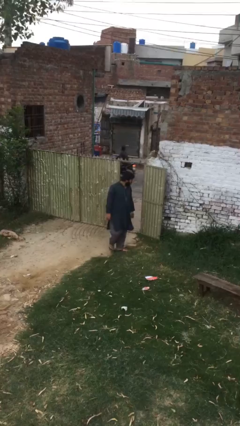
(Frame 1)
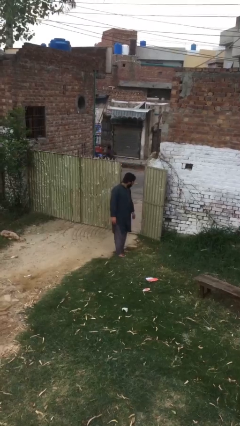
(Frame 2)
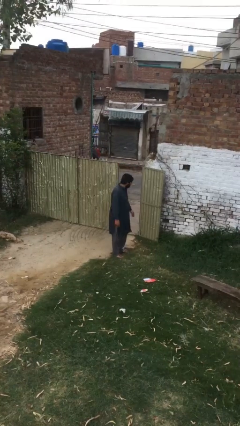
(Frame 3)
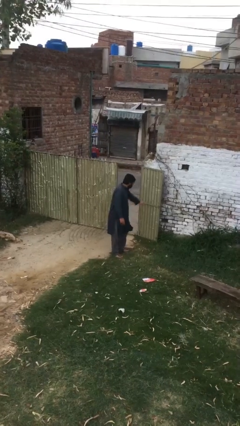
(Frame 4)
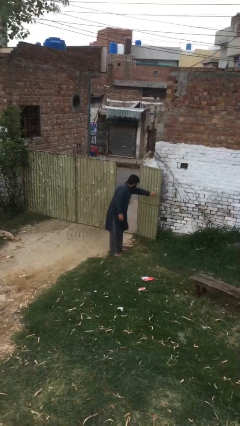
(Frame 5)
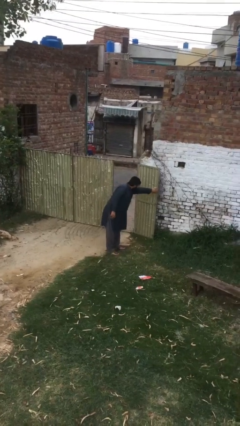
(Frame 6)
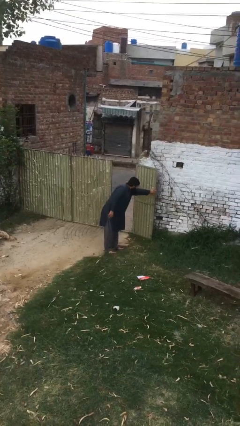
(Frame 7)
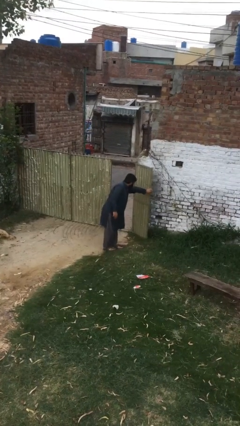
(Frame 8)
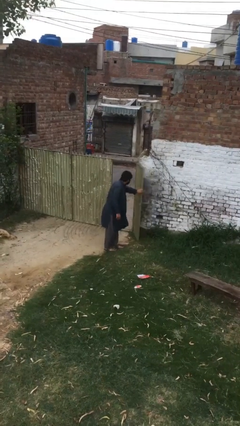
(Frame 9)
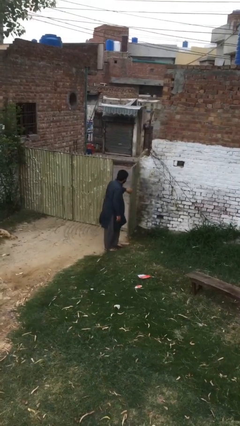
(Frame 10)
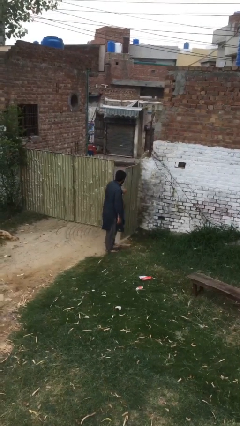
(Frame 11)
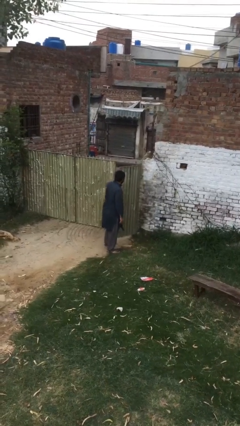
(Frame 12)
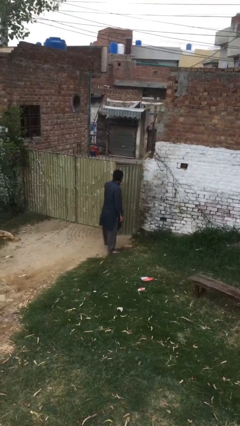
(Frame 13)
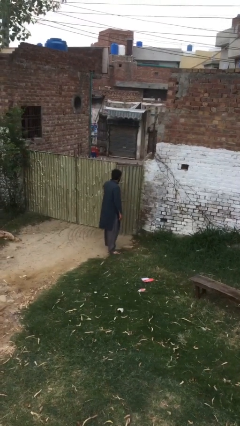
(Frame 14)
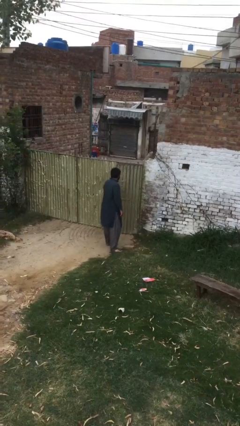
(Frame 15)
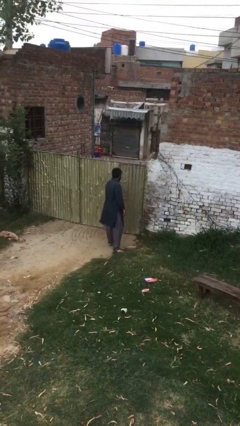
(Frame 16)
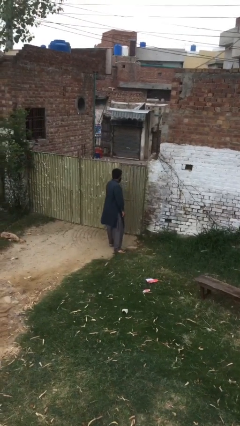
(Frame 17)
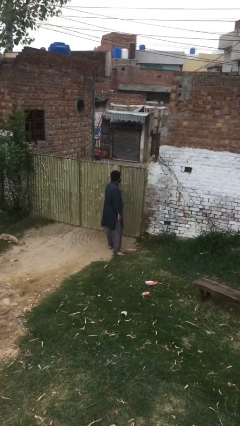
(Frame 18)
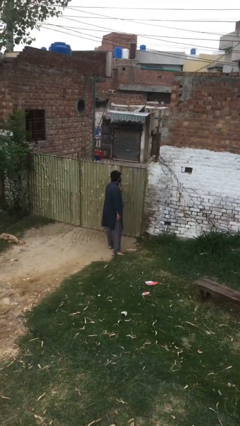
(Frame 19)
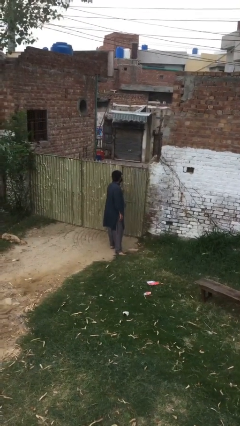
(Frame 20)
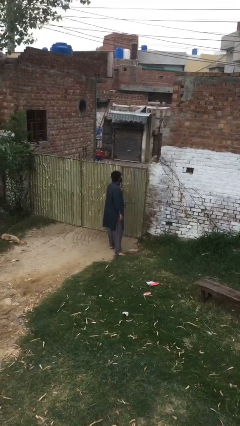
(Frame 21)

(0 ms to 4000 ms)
person closes facility door

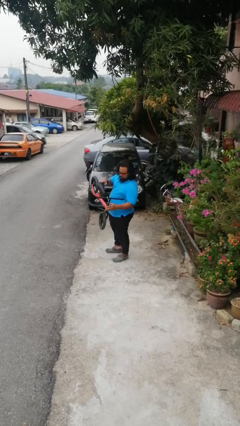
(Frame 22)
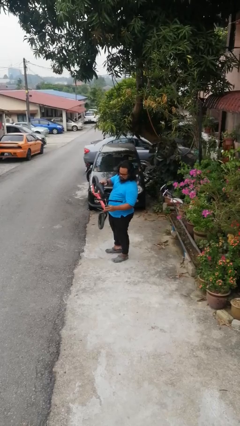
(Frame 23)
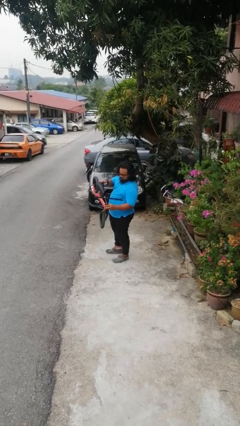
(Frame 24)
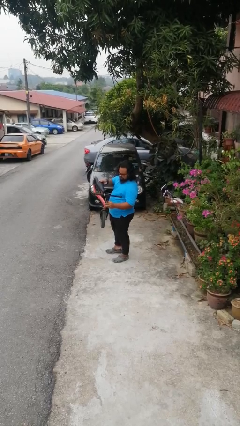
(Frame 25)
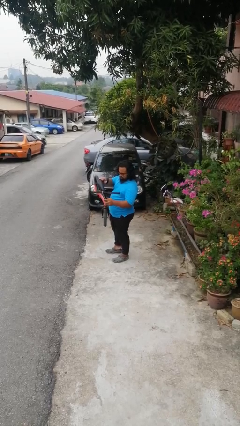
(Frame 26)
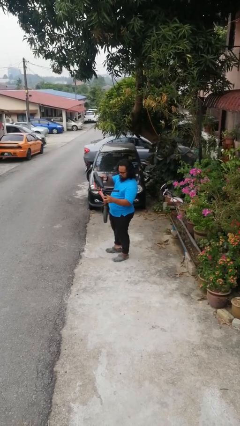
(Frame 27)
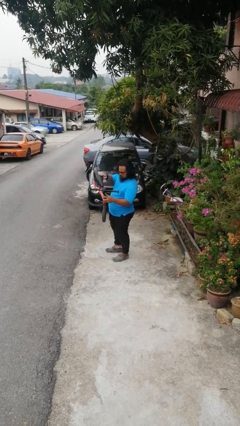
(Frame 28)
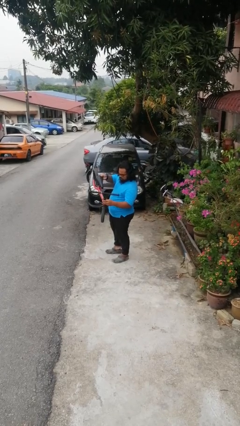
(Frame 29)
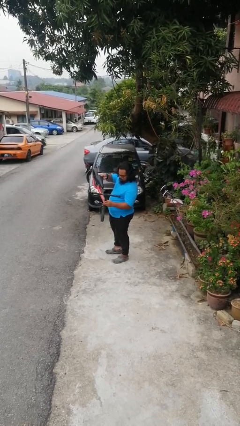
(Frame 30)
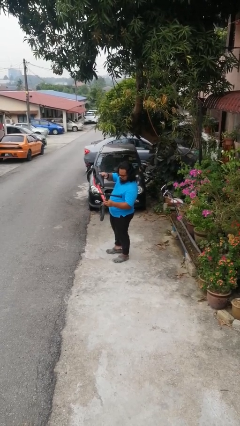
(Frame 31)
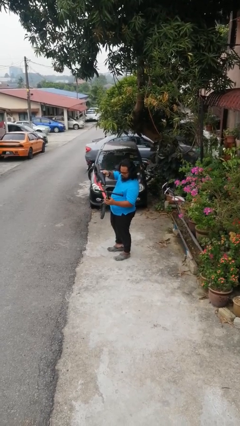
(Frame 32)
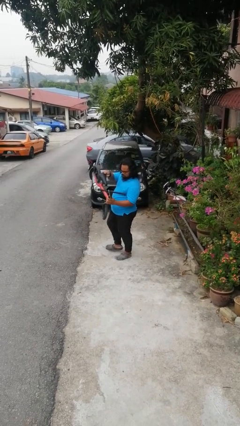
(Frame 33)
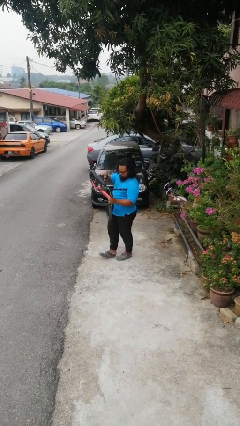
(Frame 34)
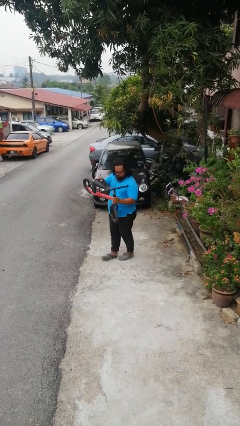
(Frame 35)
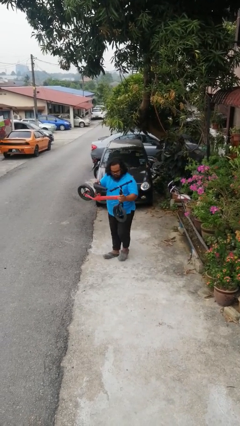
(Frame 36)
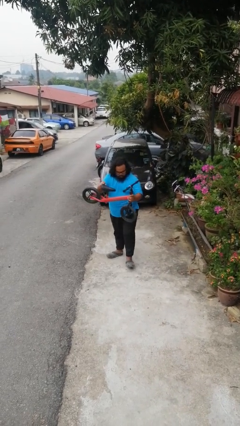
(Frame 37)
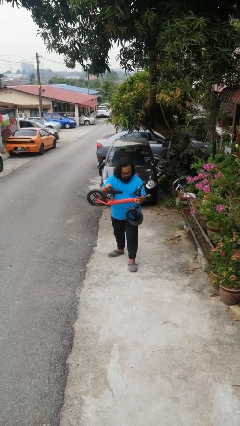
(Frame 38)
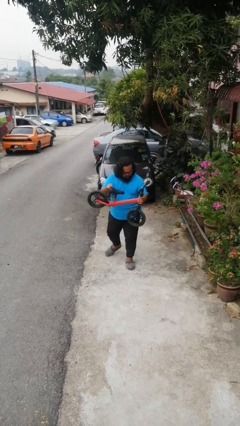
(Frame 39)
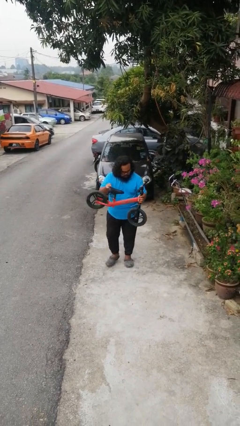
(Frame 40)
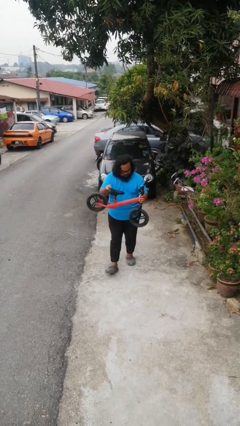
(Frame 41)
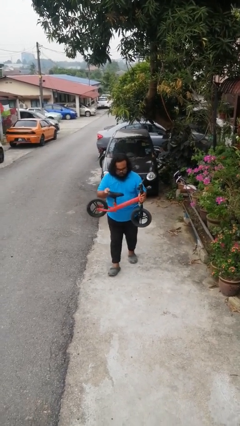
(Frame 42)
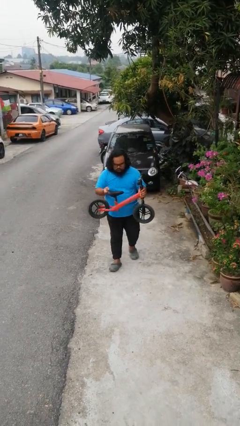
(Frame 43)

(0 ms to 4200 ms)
person carries bicycle

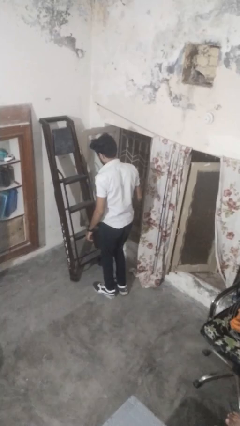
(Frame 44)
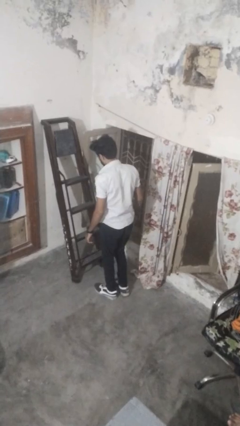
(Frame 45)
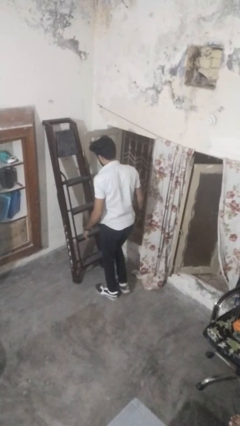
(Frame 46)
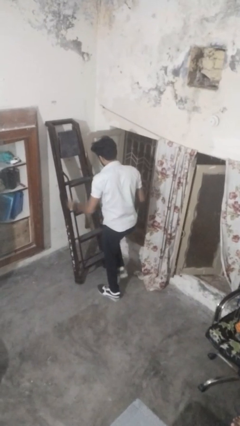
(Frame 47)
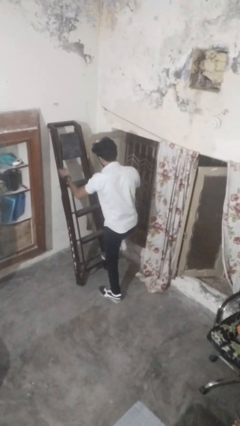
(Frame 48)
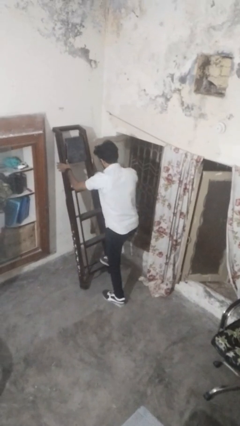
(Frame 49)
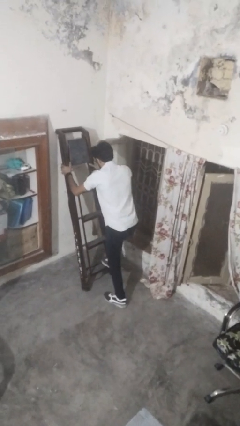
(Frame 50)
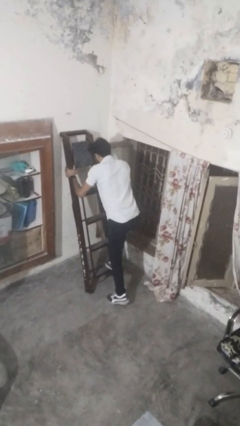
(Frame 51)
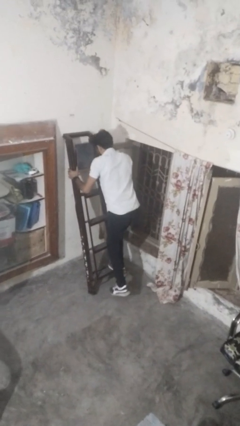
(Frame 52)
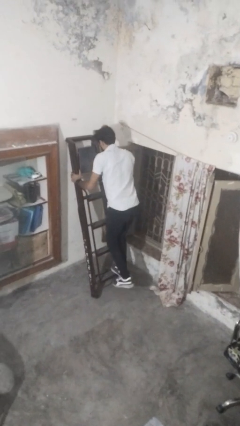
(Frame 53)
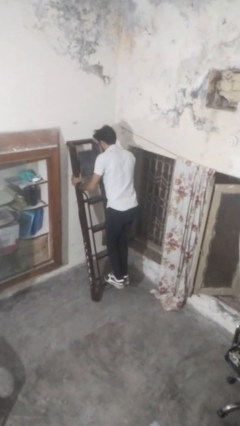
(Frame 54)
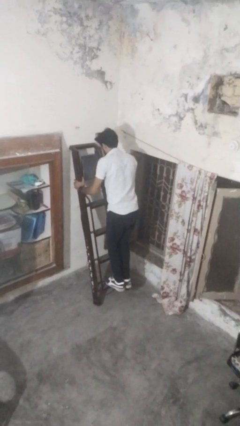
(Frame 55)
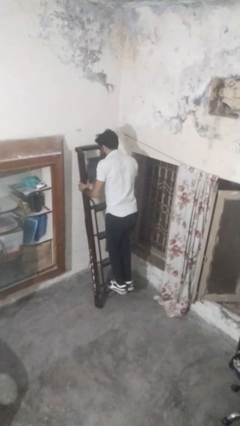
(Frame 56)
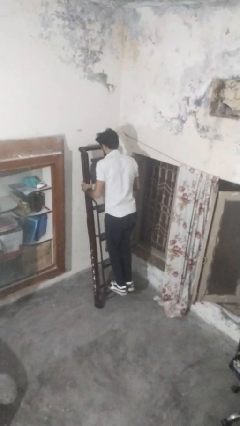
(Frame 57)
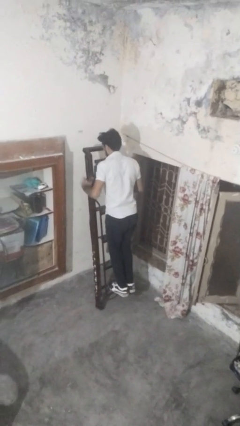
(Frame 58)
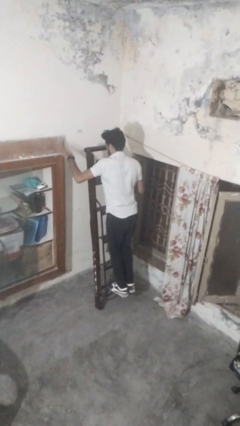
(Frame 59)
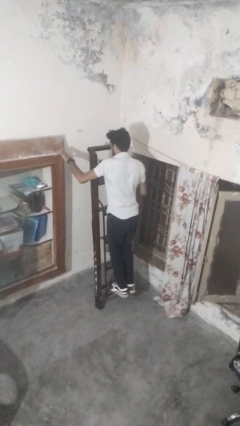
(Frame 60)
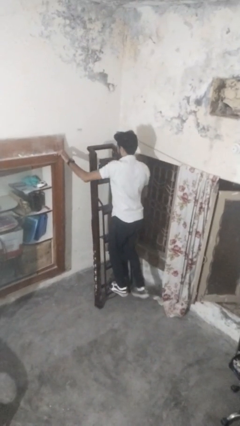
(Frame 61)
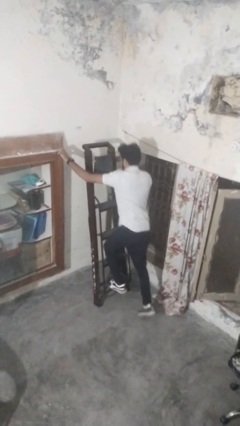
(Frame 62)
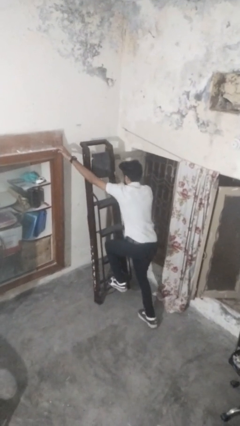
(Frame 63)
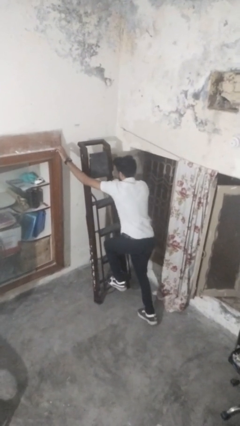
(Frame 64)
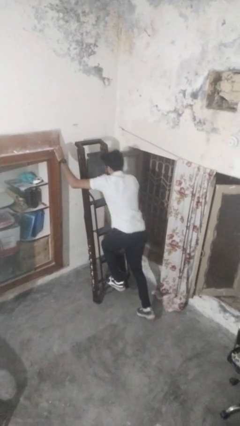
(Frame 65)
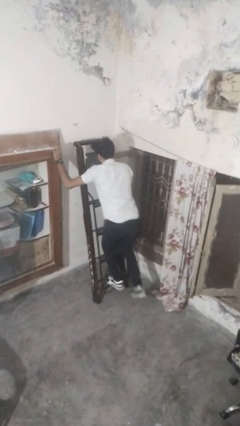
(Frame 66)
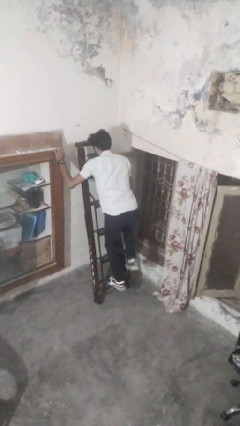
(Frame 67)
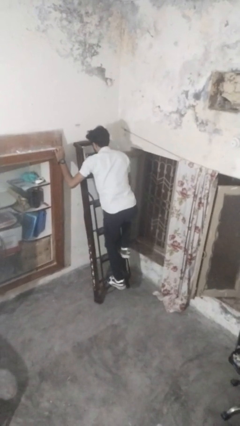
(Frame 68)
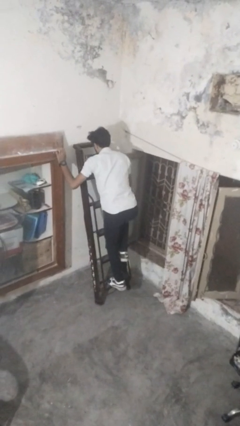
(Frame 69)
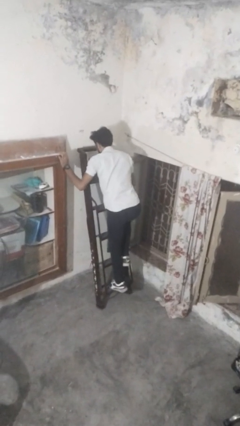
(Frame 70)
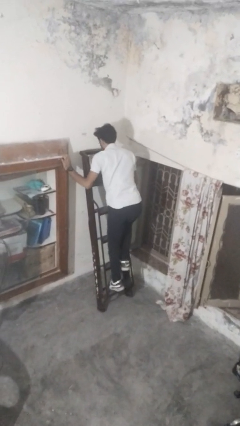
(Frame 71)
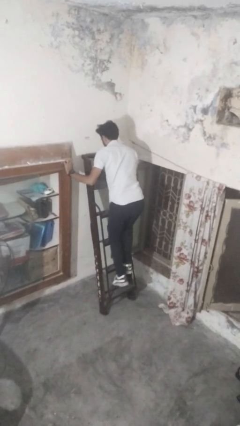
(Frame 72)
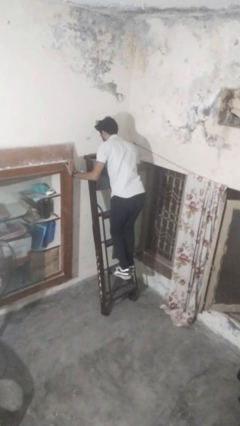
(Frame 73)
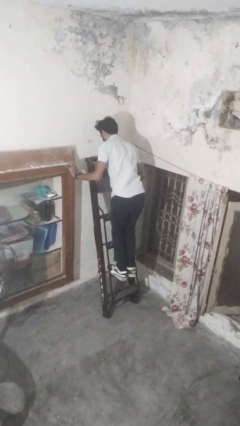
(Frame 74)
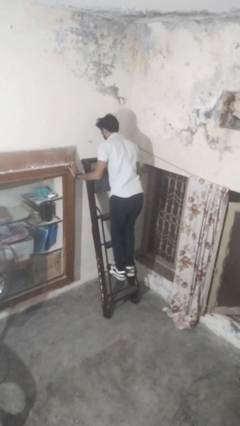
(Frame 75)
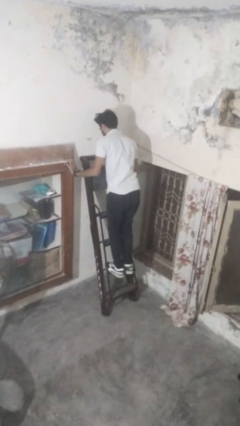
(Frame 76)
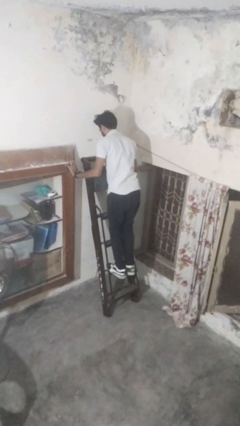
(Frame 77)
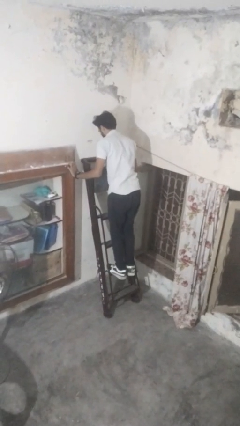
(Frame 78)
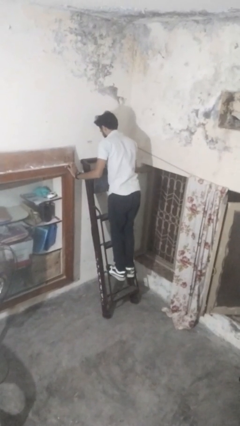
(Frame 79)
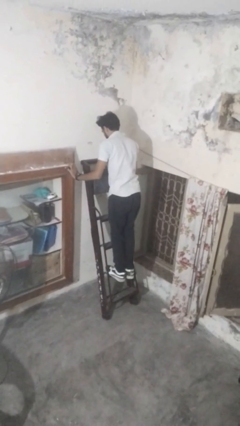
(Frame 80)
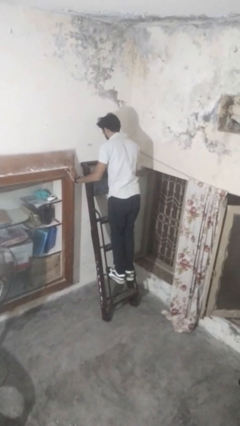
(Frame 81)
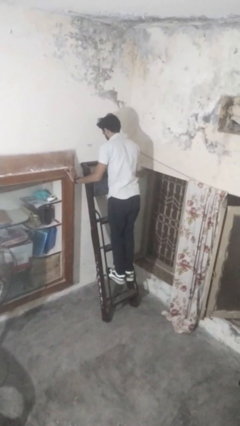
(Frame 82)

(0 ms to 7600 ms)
person climbs up ladder

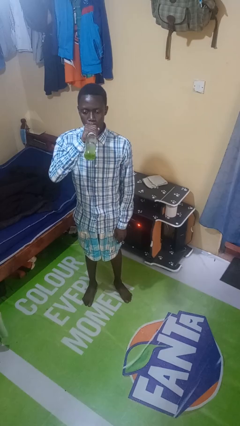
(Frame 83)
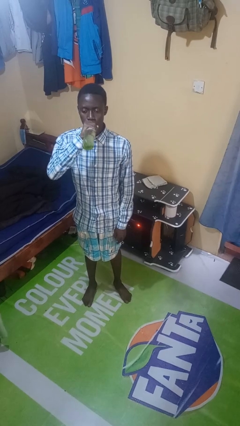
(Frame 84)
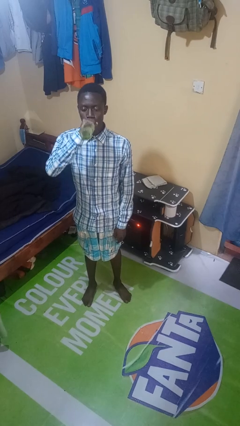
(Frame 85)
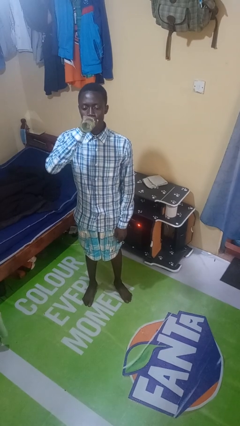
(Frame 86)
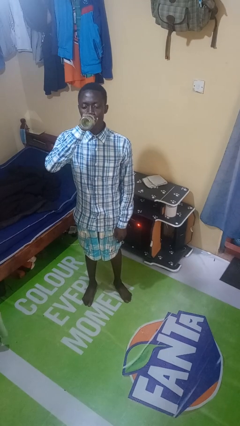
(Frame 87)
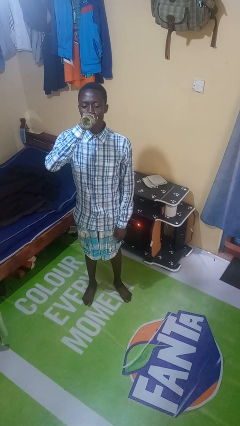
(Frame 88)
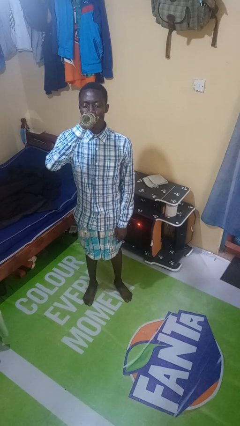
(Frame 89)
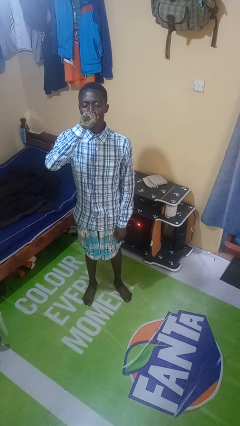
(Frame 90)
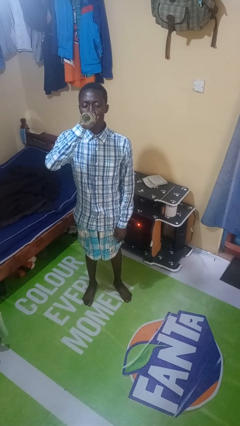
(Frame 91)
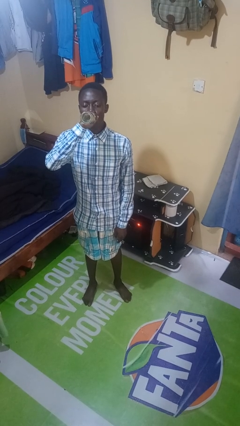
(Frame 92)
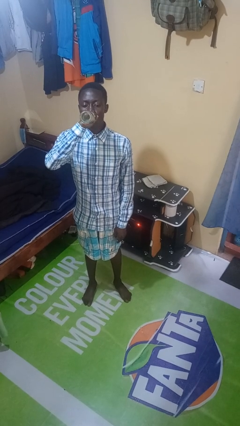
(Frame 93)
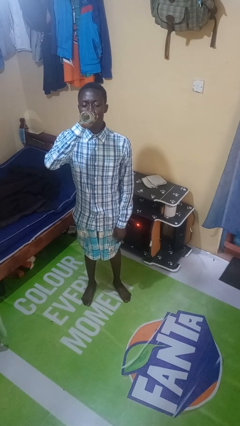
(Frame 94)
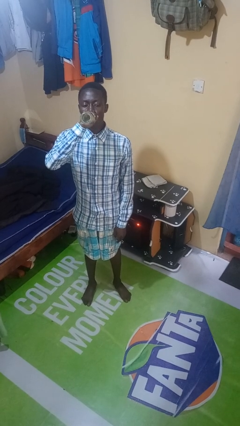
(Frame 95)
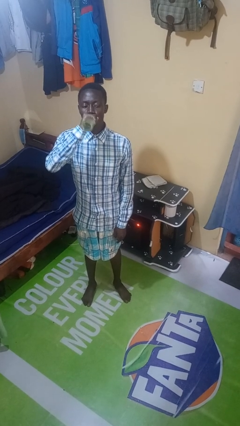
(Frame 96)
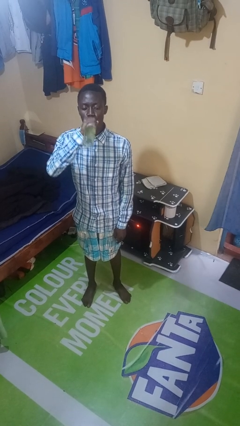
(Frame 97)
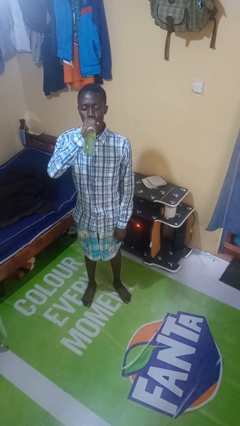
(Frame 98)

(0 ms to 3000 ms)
person drinks from bottle
